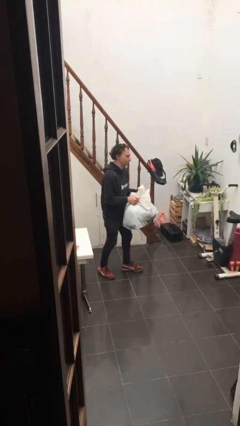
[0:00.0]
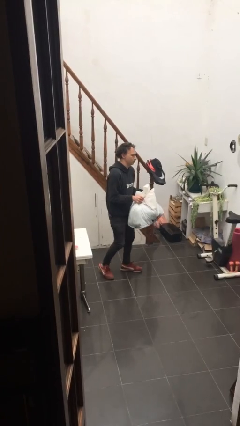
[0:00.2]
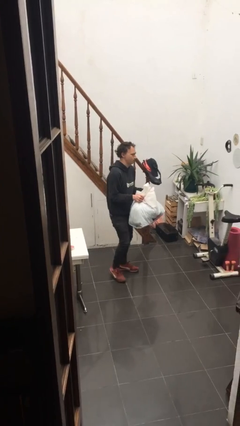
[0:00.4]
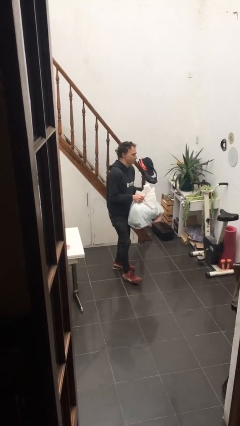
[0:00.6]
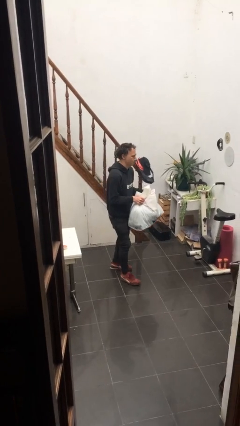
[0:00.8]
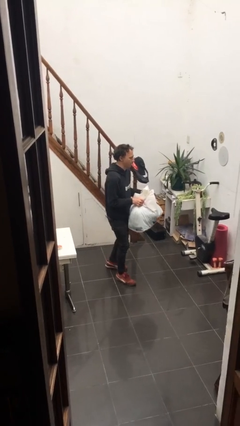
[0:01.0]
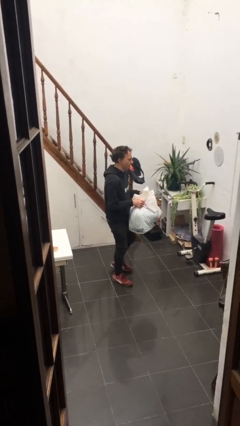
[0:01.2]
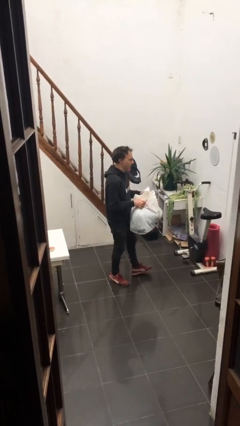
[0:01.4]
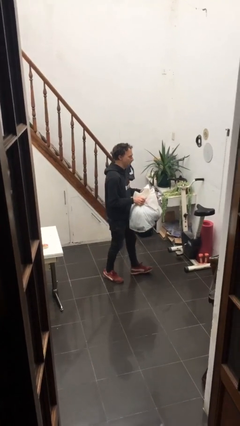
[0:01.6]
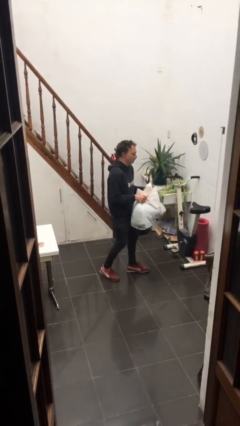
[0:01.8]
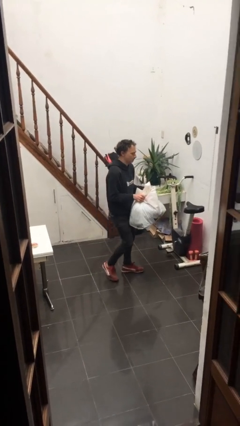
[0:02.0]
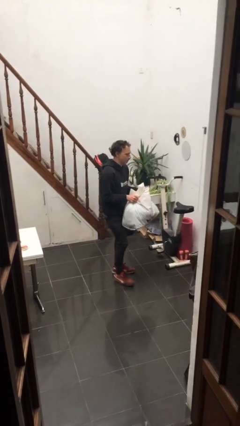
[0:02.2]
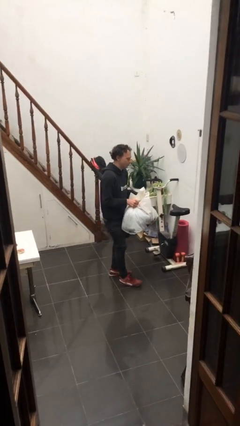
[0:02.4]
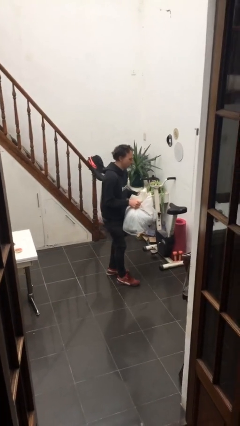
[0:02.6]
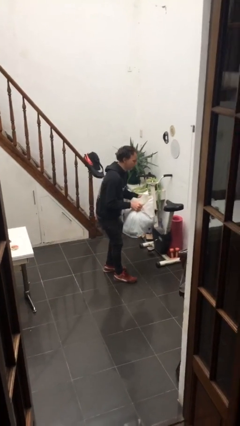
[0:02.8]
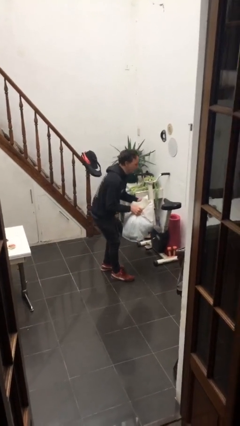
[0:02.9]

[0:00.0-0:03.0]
person carries heavy object

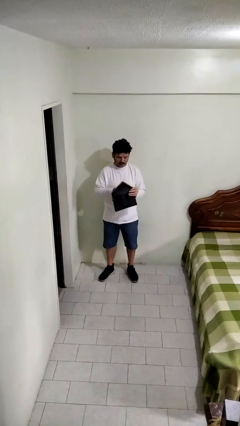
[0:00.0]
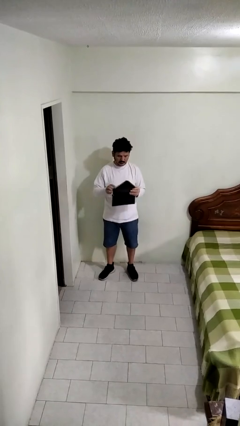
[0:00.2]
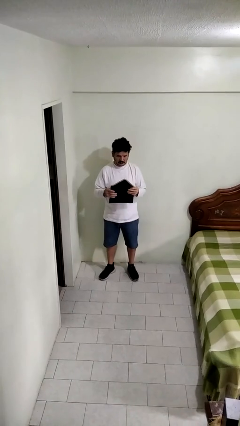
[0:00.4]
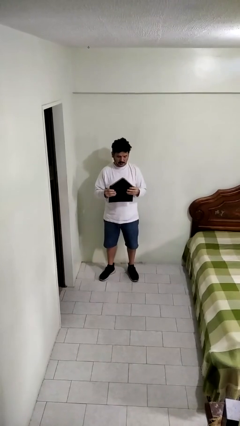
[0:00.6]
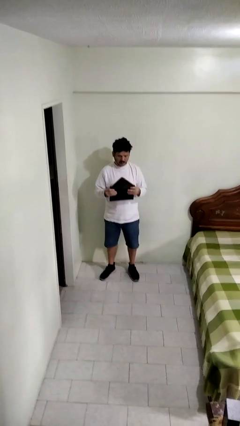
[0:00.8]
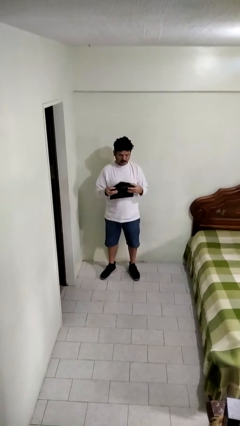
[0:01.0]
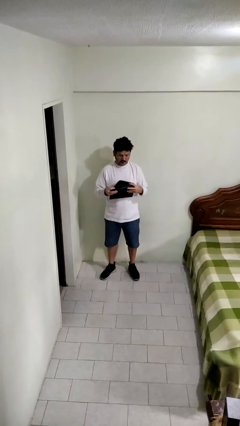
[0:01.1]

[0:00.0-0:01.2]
person puts object into purse

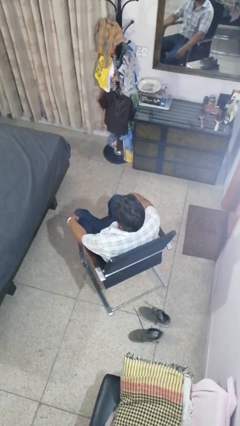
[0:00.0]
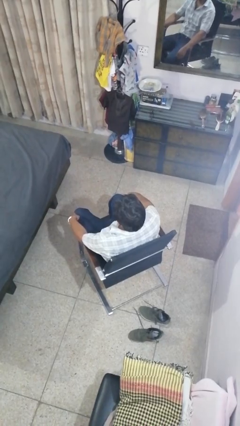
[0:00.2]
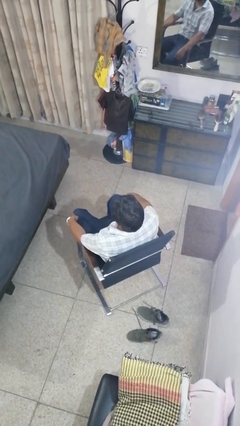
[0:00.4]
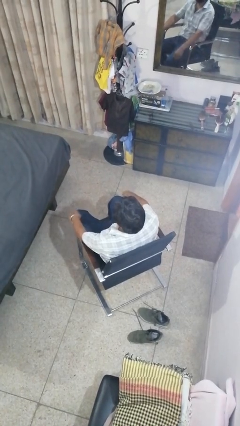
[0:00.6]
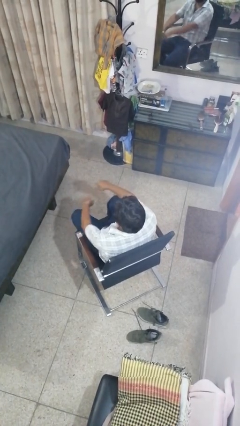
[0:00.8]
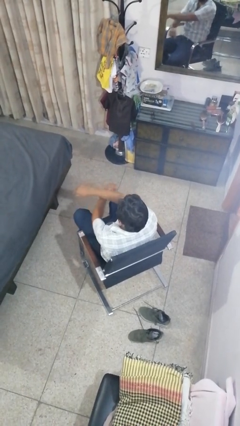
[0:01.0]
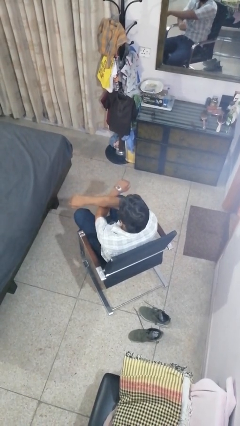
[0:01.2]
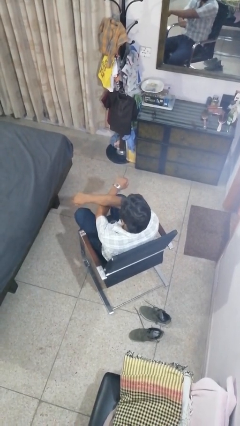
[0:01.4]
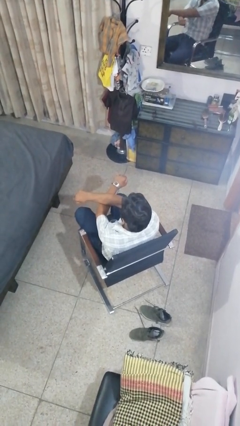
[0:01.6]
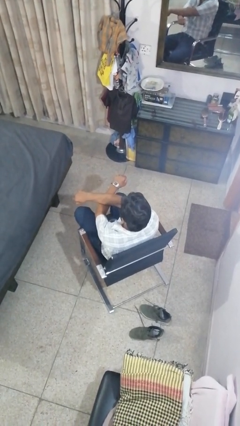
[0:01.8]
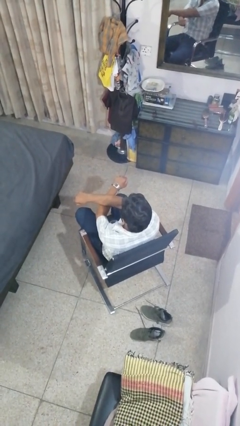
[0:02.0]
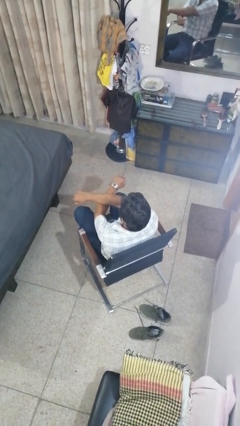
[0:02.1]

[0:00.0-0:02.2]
person gestures arms x

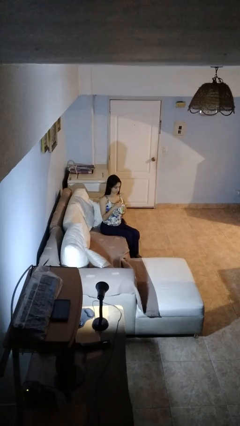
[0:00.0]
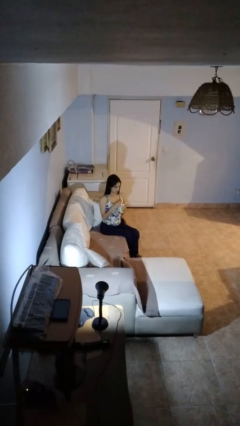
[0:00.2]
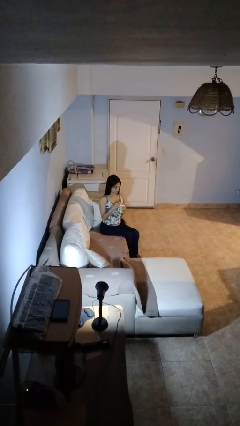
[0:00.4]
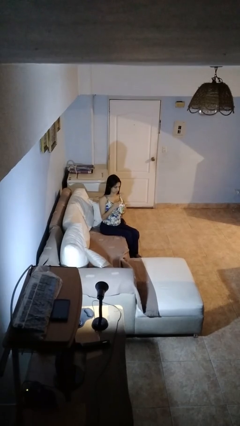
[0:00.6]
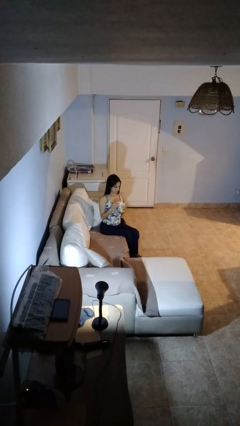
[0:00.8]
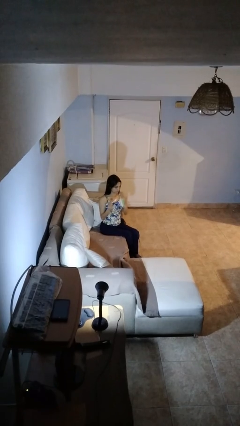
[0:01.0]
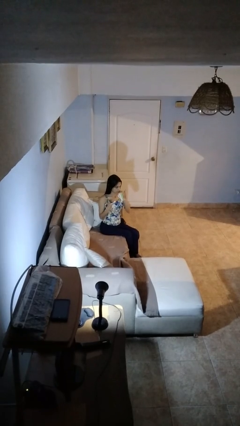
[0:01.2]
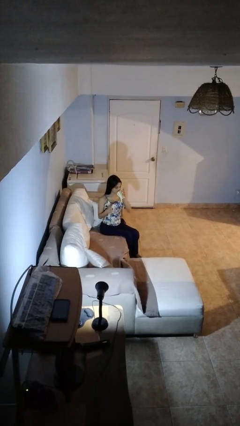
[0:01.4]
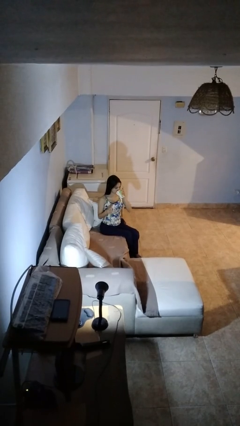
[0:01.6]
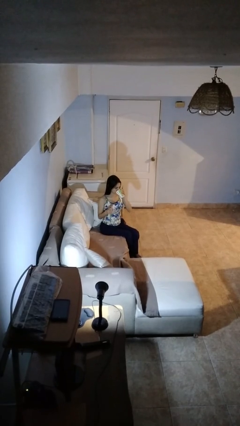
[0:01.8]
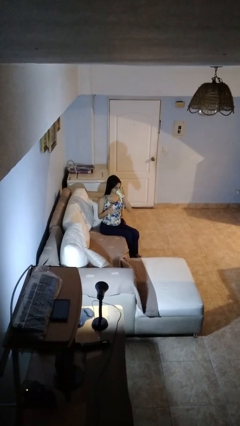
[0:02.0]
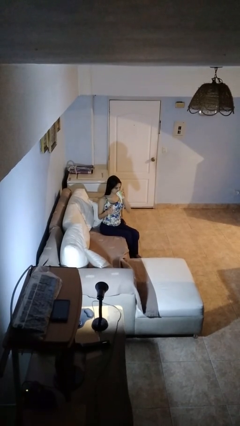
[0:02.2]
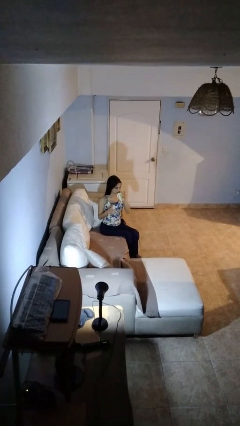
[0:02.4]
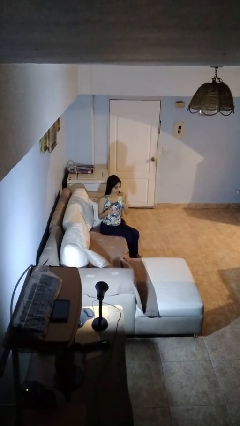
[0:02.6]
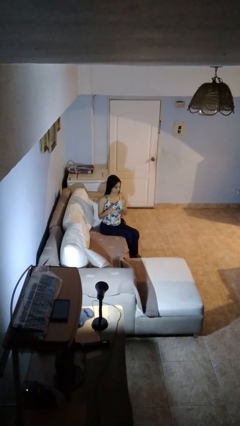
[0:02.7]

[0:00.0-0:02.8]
person drinks from mug

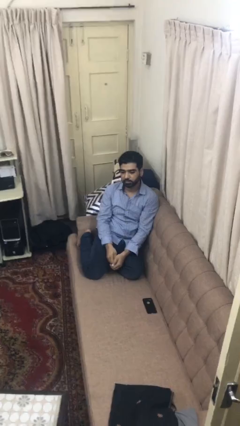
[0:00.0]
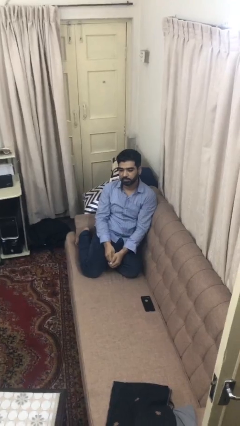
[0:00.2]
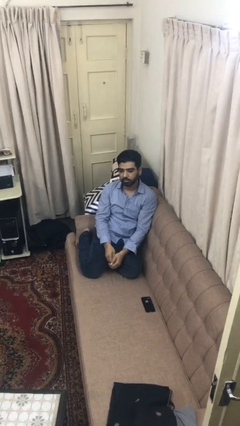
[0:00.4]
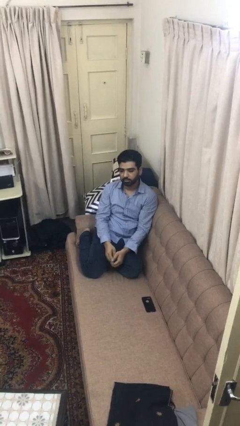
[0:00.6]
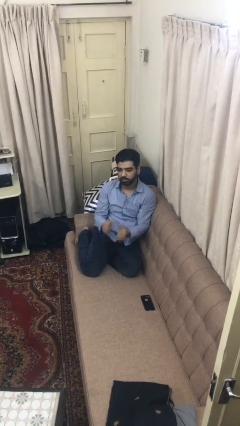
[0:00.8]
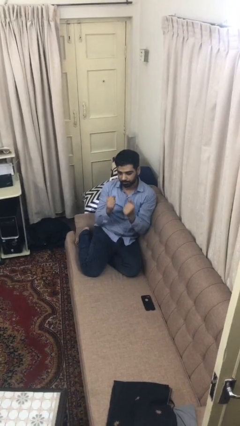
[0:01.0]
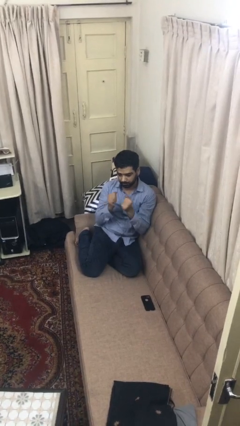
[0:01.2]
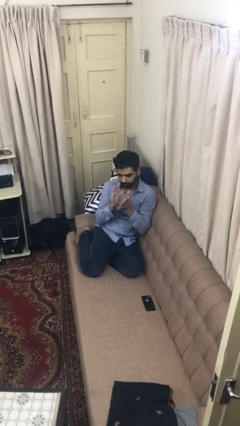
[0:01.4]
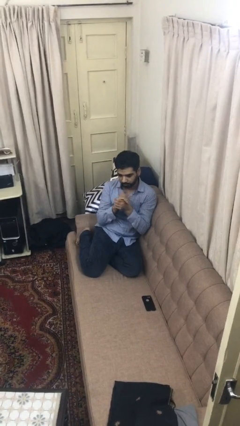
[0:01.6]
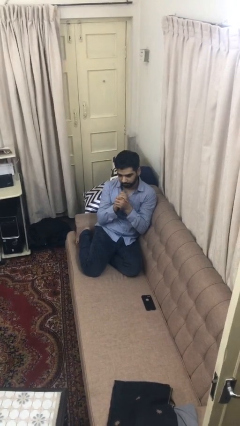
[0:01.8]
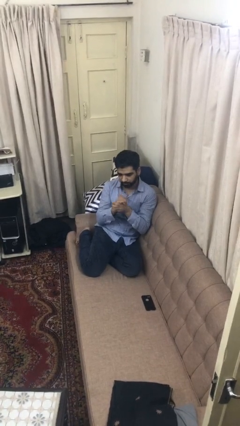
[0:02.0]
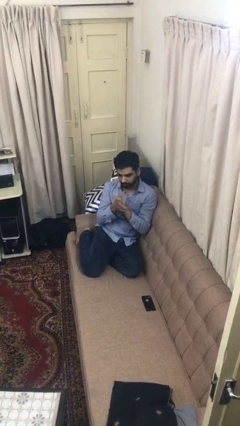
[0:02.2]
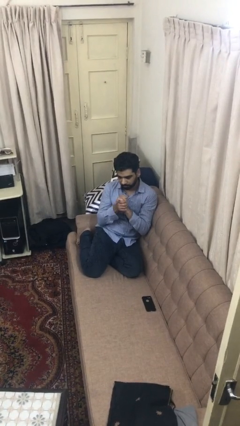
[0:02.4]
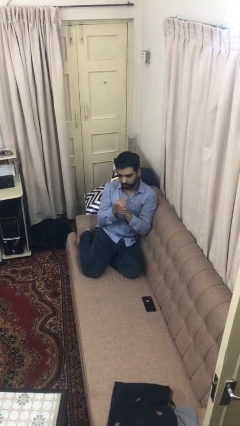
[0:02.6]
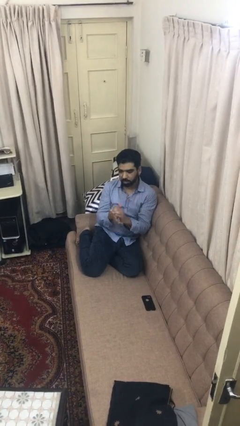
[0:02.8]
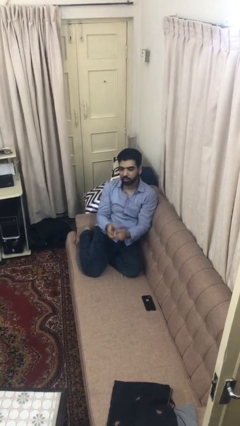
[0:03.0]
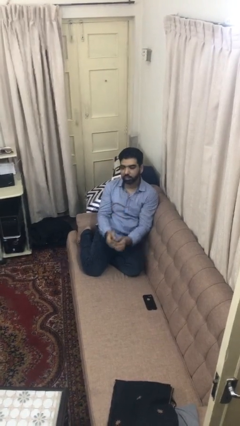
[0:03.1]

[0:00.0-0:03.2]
person cracks knuckles

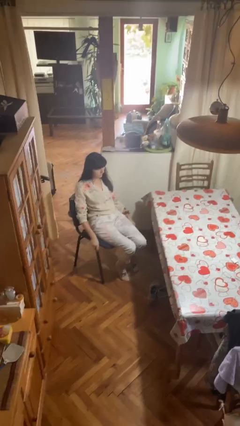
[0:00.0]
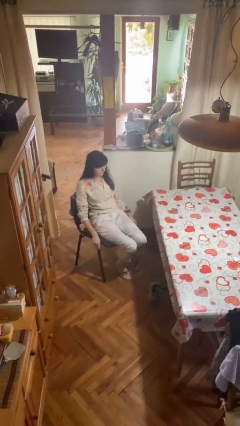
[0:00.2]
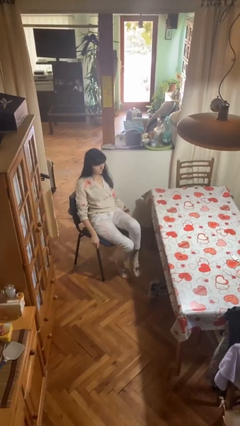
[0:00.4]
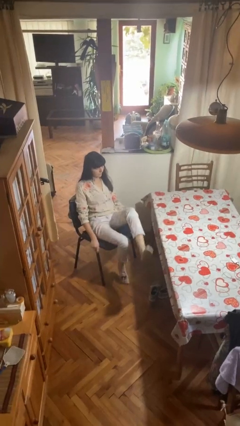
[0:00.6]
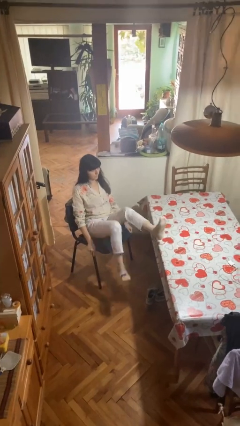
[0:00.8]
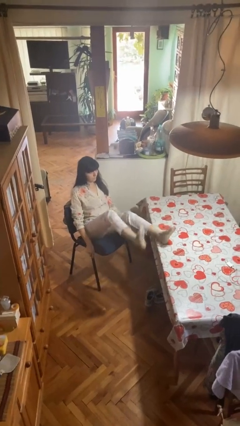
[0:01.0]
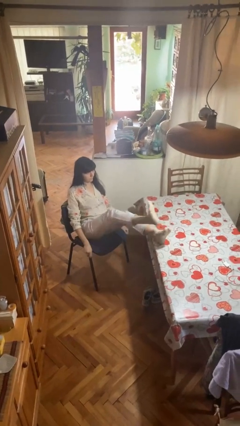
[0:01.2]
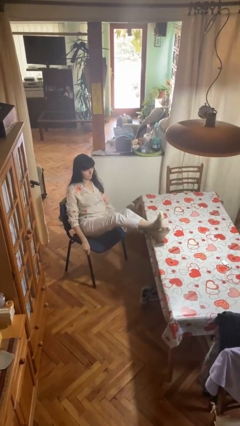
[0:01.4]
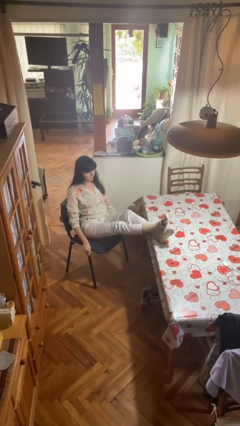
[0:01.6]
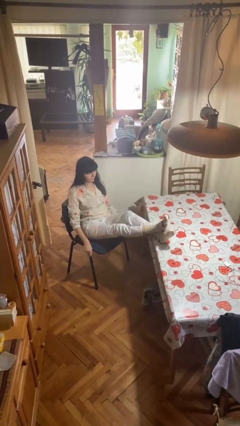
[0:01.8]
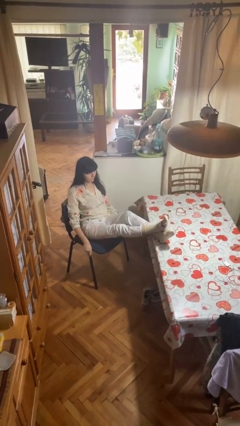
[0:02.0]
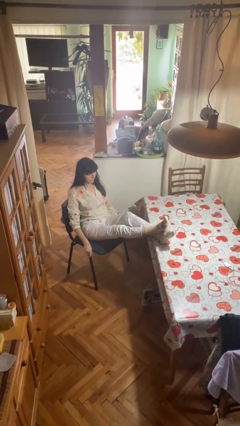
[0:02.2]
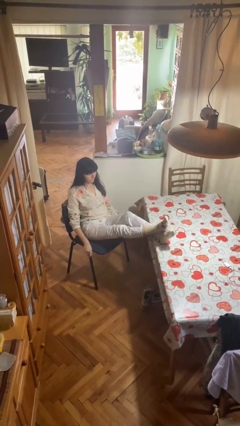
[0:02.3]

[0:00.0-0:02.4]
person puts feet up

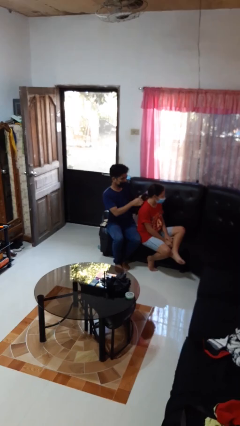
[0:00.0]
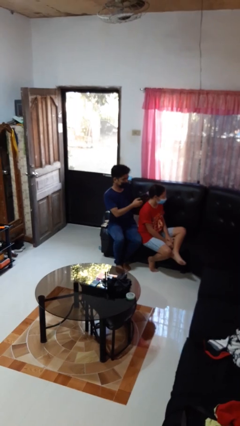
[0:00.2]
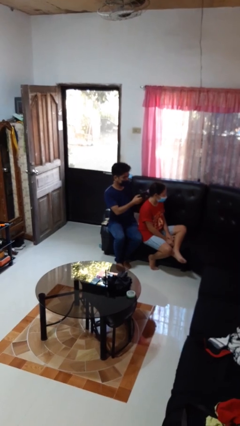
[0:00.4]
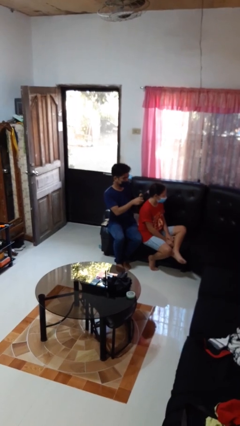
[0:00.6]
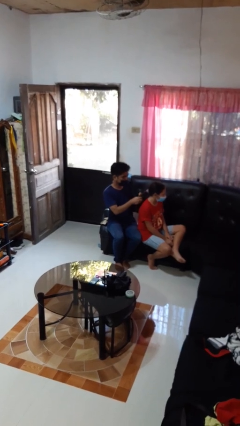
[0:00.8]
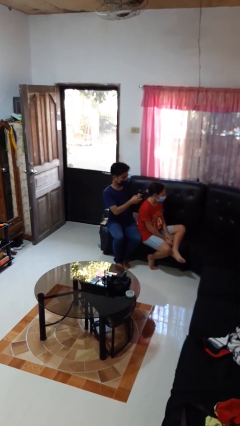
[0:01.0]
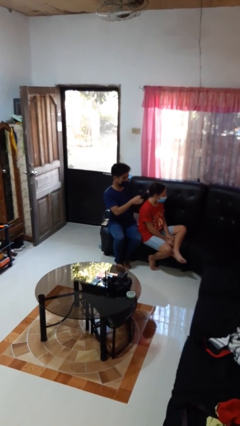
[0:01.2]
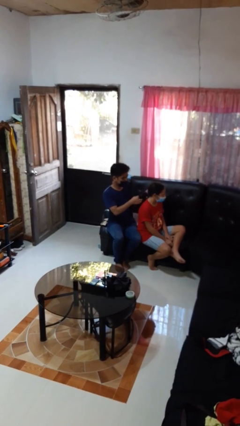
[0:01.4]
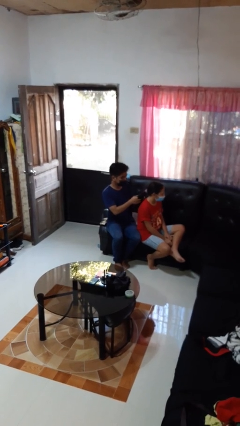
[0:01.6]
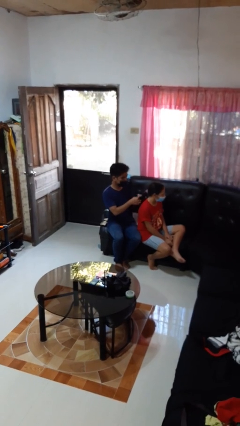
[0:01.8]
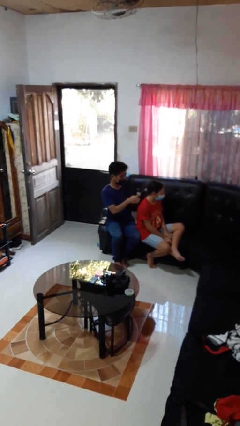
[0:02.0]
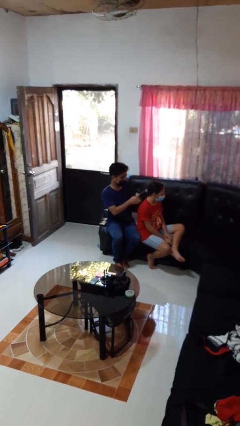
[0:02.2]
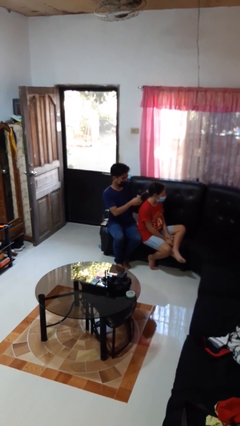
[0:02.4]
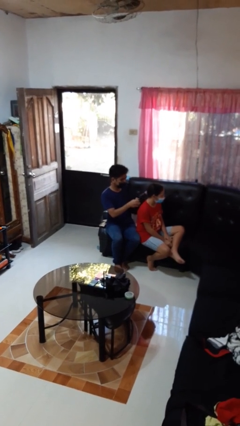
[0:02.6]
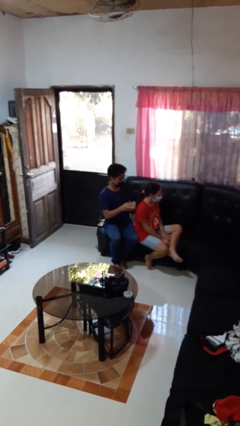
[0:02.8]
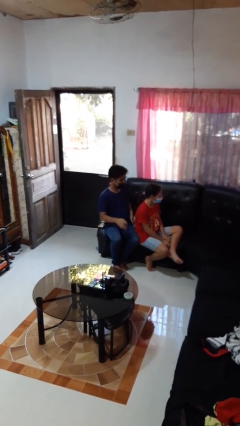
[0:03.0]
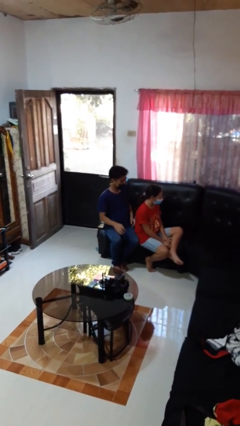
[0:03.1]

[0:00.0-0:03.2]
person braids hair of person
